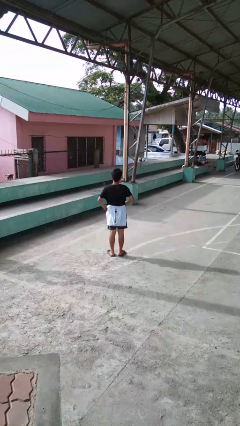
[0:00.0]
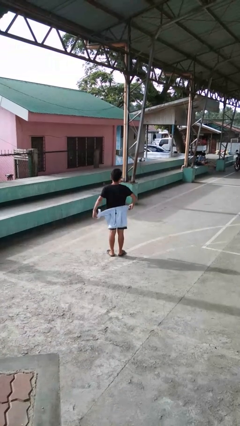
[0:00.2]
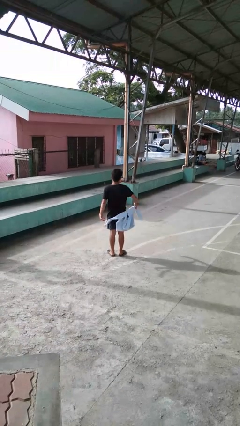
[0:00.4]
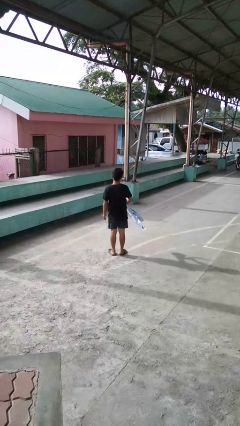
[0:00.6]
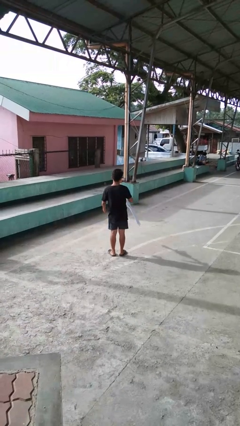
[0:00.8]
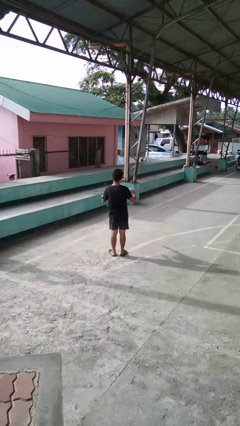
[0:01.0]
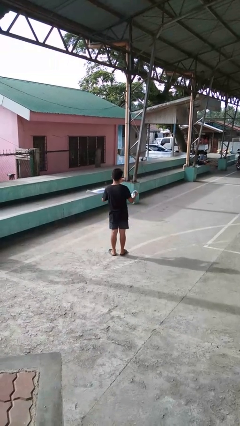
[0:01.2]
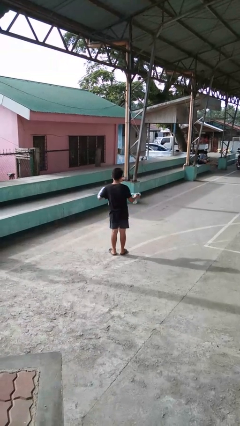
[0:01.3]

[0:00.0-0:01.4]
person unties jacket around waist

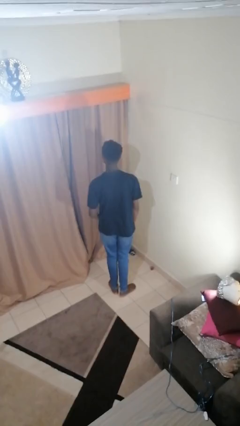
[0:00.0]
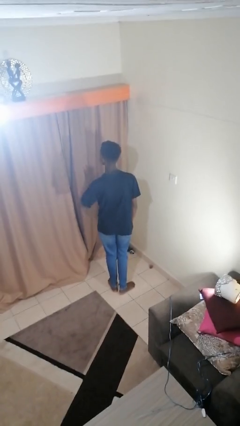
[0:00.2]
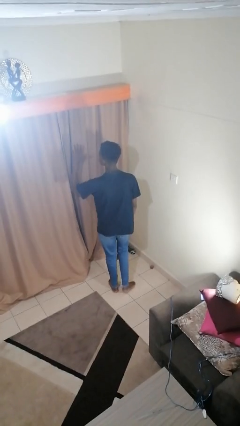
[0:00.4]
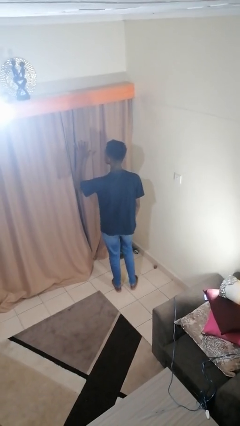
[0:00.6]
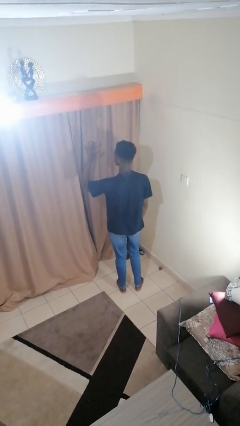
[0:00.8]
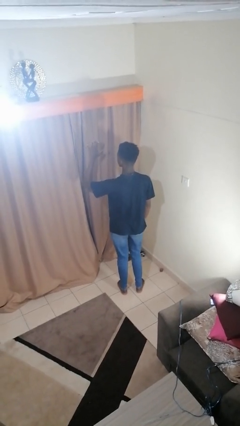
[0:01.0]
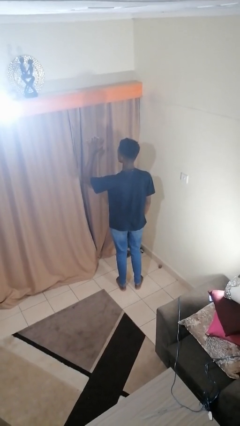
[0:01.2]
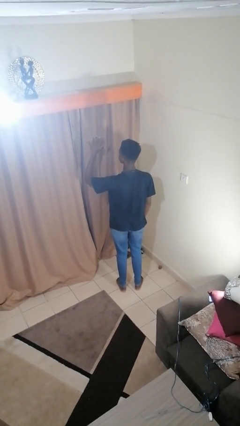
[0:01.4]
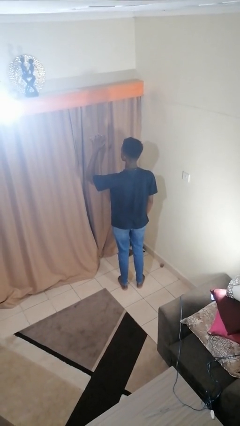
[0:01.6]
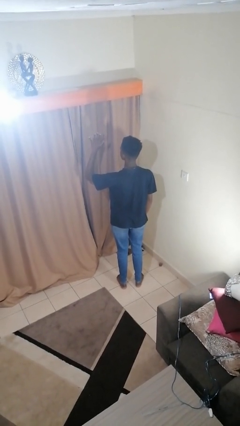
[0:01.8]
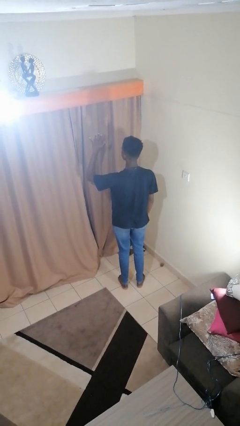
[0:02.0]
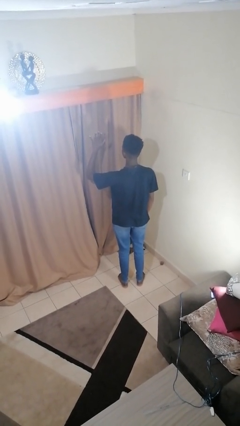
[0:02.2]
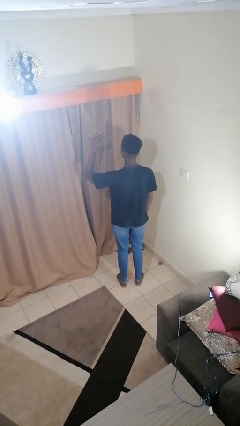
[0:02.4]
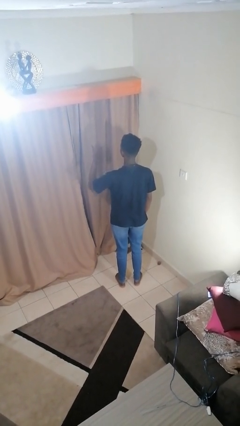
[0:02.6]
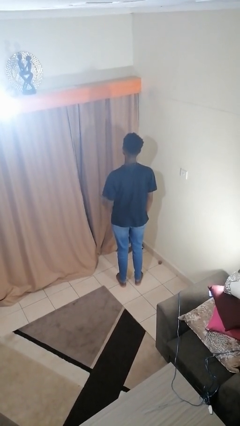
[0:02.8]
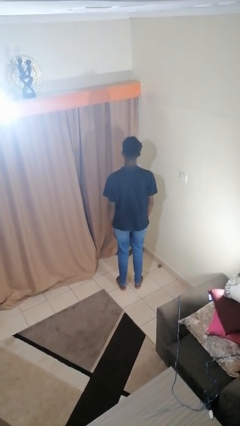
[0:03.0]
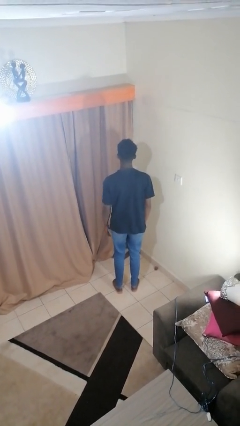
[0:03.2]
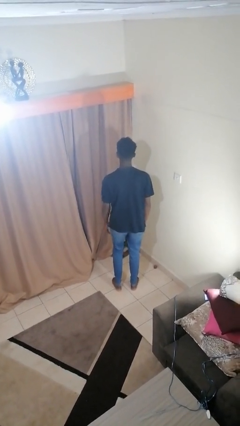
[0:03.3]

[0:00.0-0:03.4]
person gestures number five

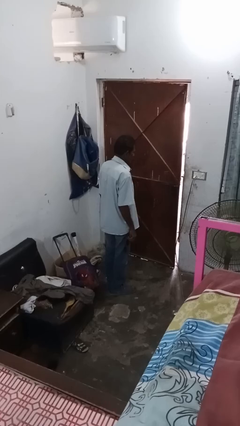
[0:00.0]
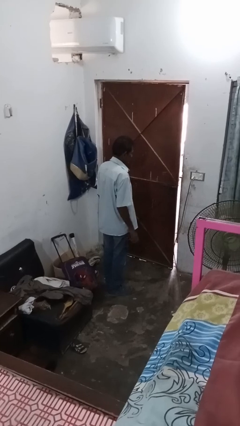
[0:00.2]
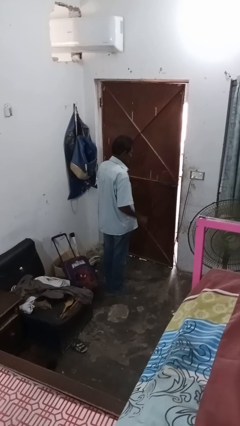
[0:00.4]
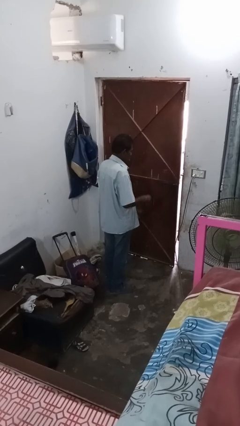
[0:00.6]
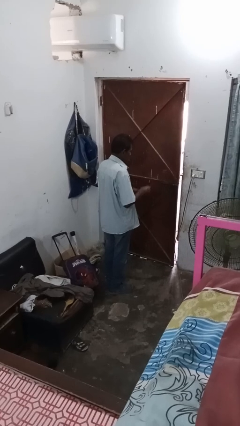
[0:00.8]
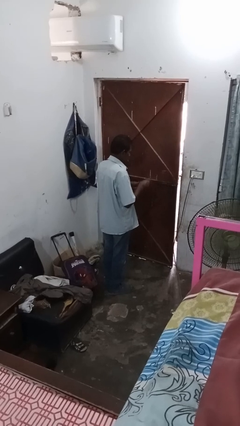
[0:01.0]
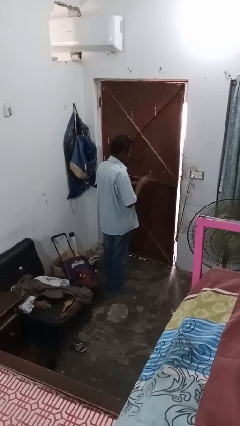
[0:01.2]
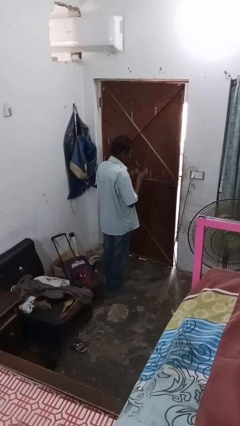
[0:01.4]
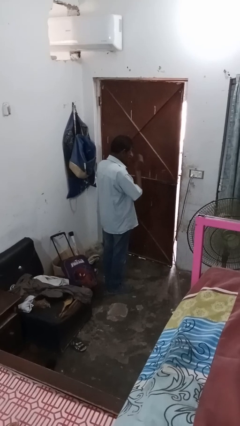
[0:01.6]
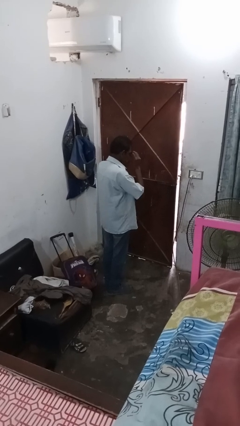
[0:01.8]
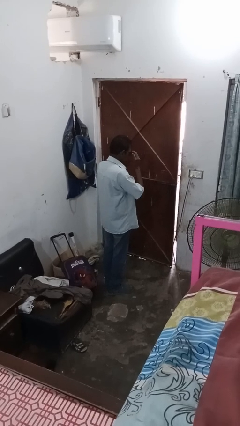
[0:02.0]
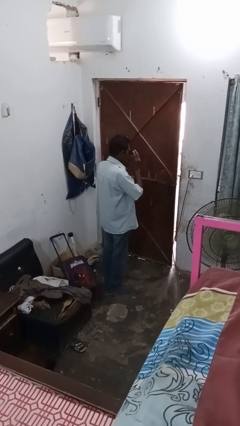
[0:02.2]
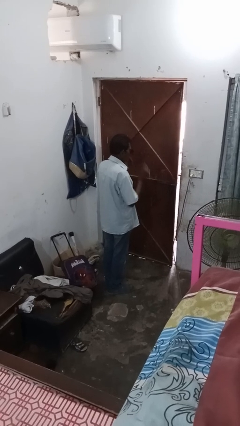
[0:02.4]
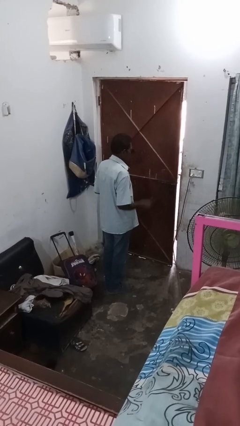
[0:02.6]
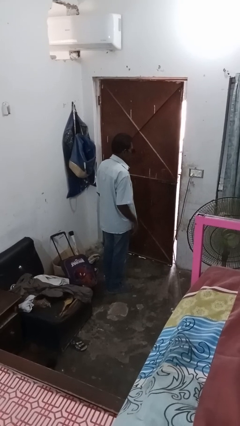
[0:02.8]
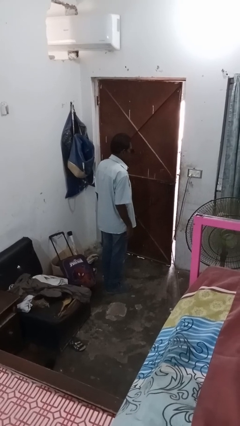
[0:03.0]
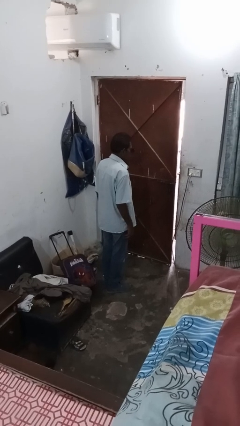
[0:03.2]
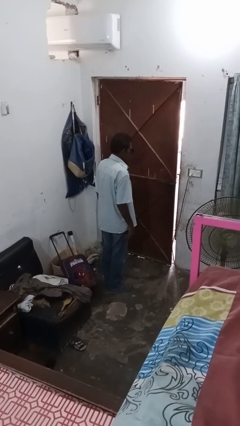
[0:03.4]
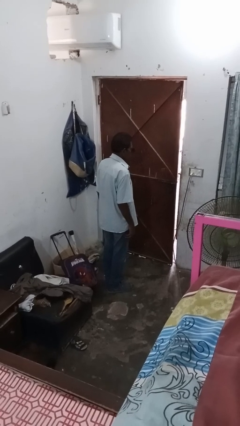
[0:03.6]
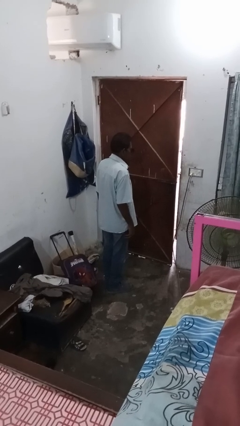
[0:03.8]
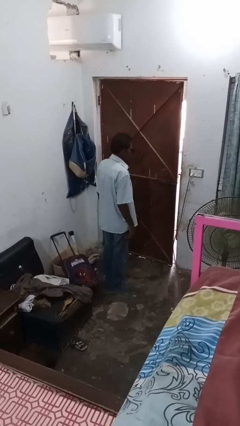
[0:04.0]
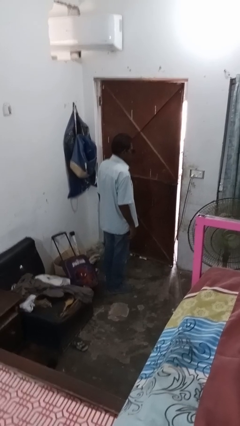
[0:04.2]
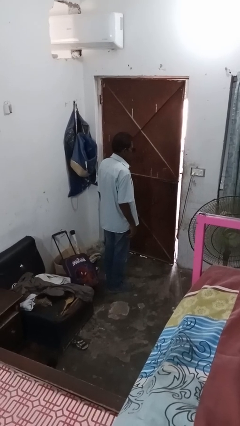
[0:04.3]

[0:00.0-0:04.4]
person puts on sunglasses

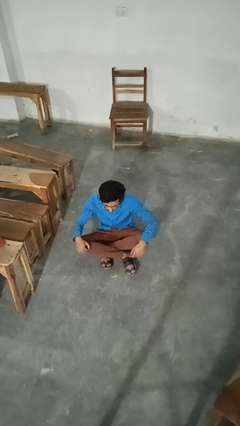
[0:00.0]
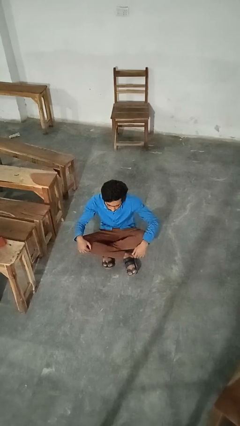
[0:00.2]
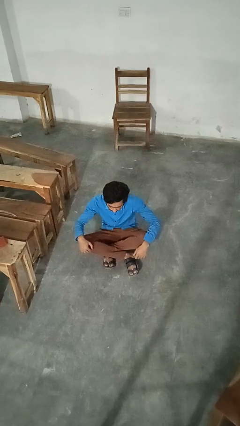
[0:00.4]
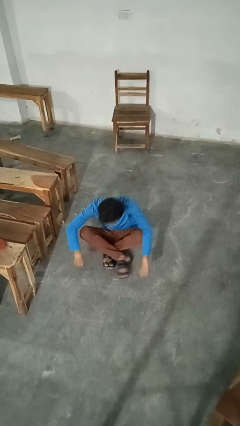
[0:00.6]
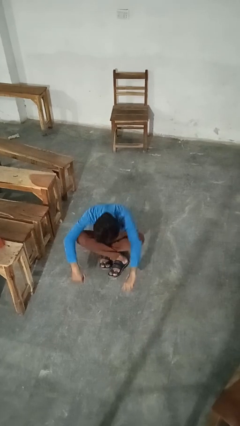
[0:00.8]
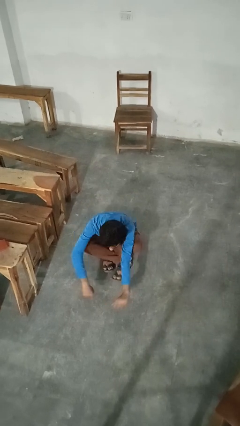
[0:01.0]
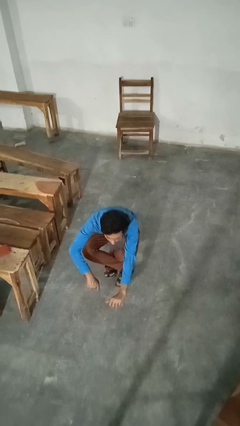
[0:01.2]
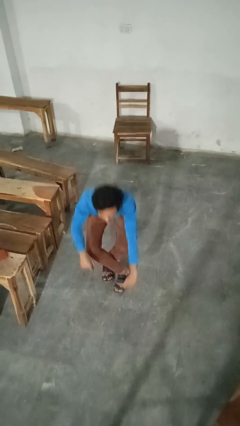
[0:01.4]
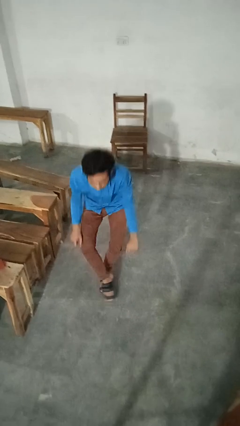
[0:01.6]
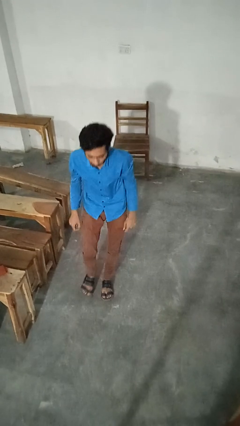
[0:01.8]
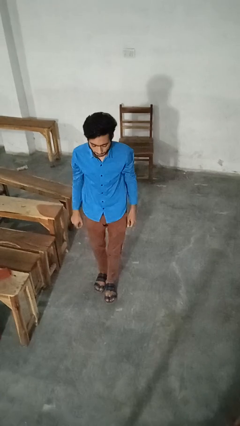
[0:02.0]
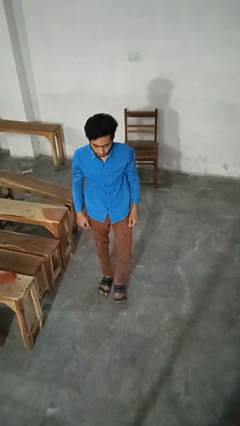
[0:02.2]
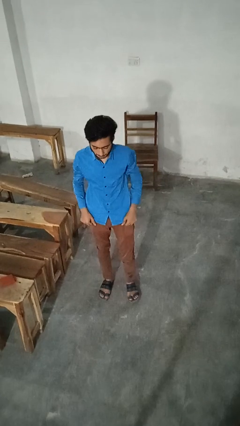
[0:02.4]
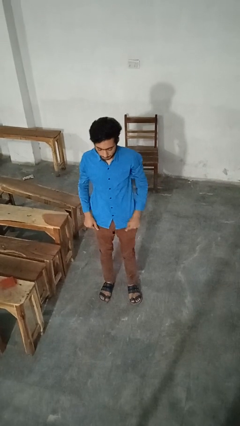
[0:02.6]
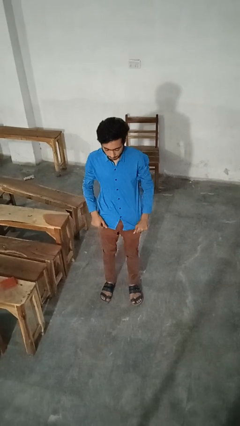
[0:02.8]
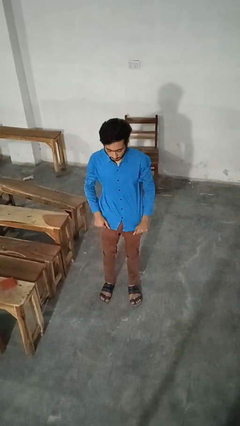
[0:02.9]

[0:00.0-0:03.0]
person stands up from floor

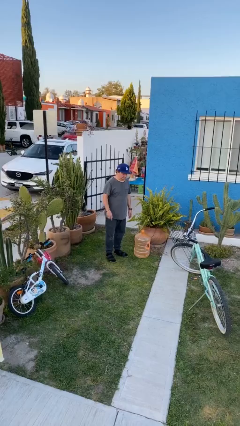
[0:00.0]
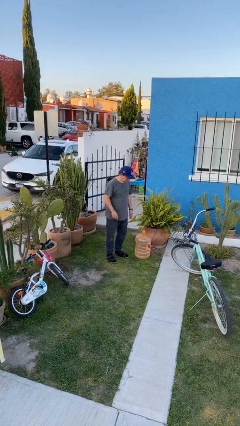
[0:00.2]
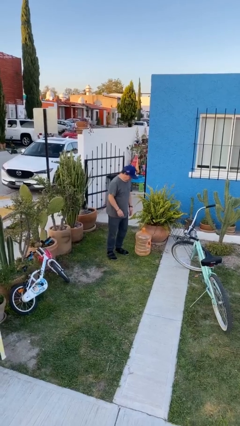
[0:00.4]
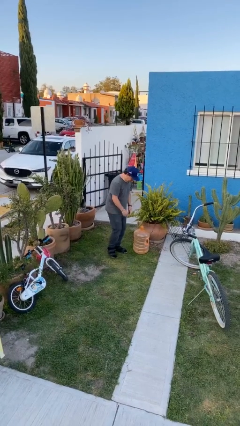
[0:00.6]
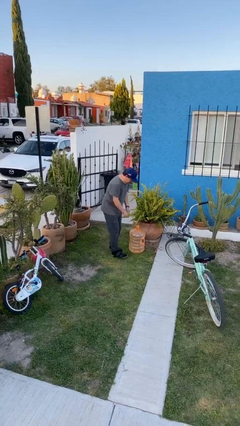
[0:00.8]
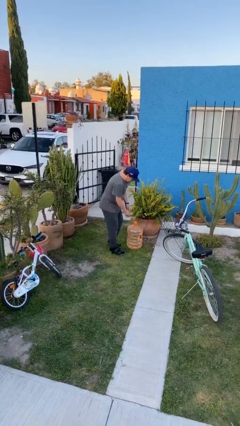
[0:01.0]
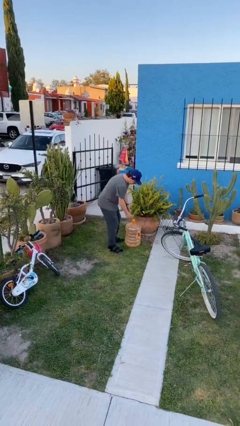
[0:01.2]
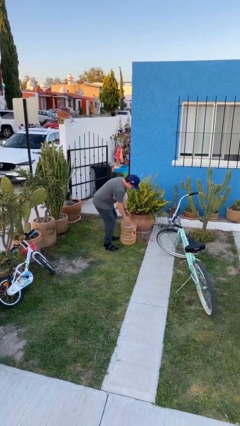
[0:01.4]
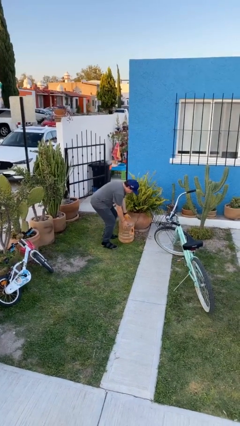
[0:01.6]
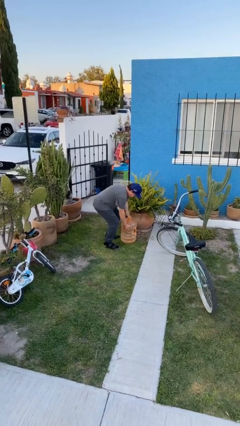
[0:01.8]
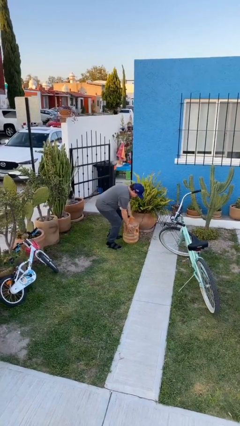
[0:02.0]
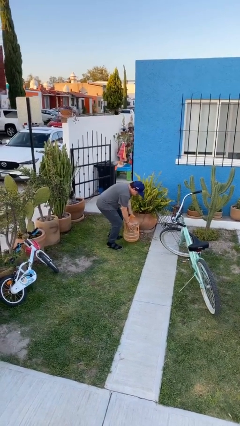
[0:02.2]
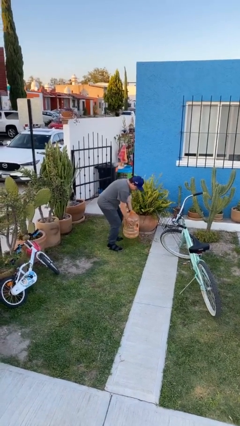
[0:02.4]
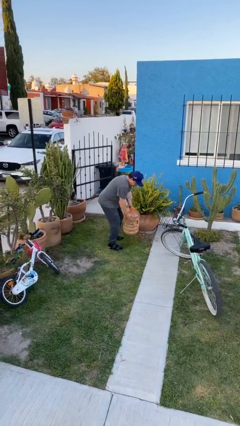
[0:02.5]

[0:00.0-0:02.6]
person picks up object from floor

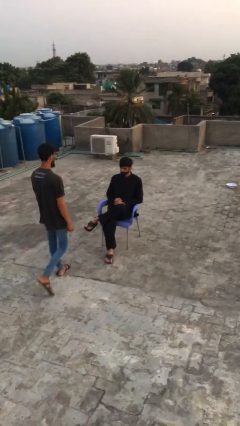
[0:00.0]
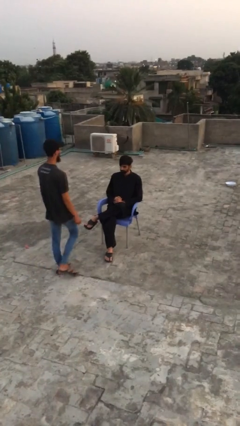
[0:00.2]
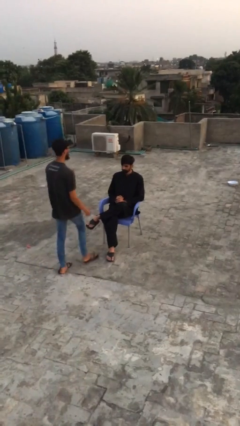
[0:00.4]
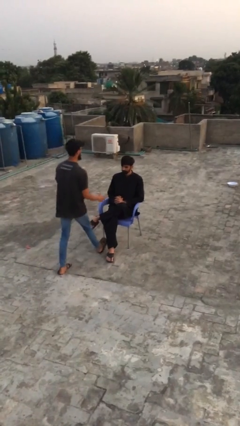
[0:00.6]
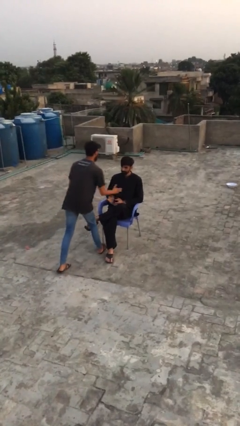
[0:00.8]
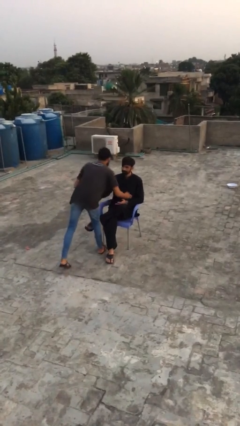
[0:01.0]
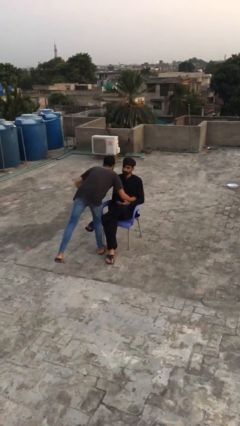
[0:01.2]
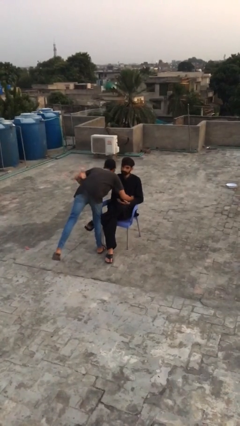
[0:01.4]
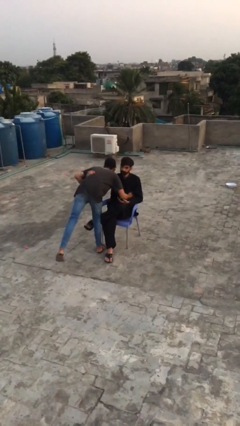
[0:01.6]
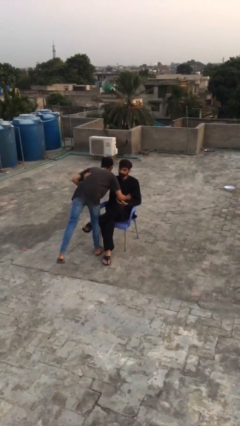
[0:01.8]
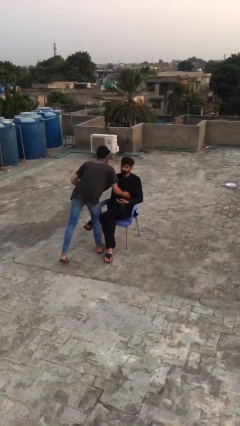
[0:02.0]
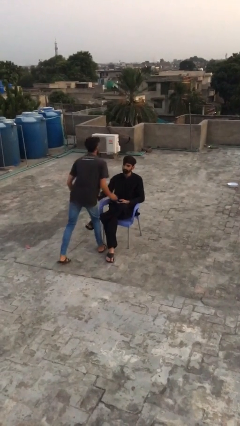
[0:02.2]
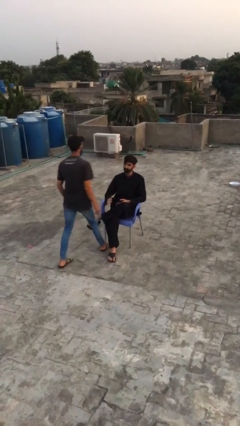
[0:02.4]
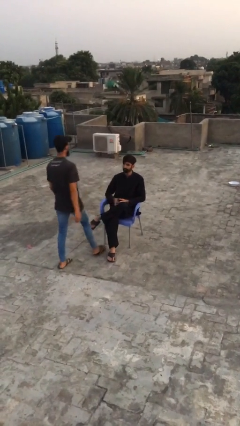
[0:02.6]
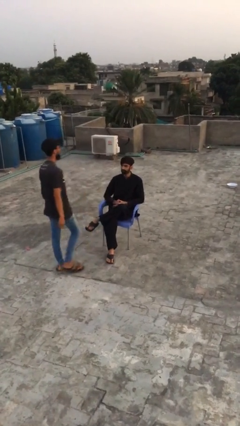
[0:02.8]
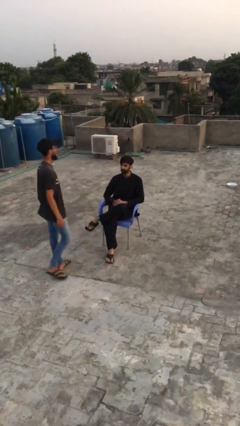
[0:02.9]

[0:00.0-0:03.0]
person embraces person
